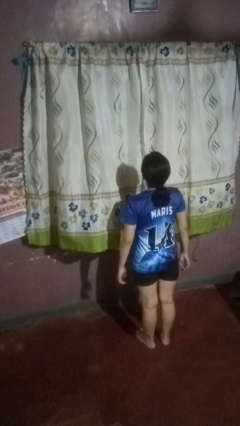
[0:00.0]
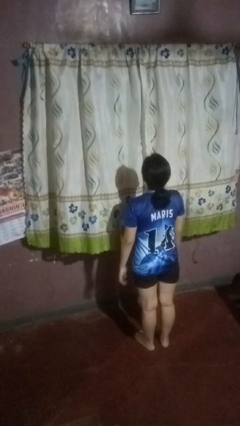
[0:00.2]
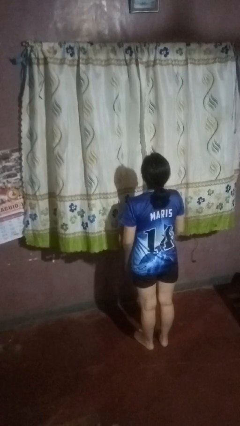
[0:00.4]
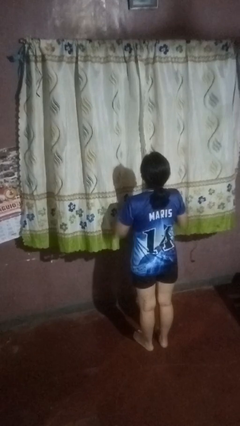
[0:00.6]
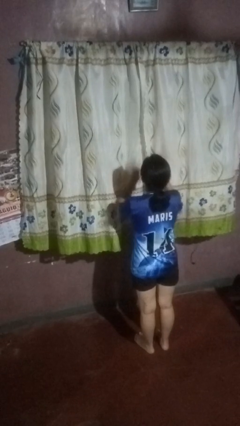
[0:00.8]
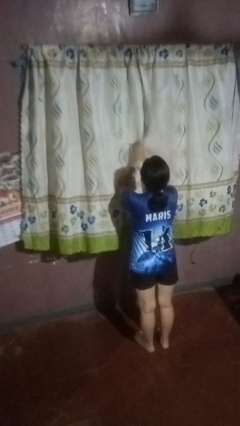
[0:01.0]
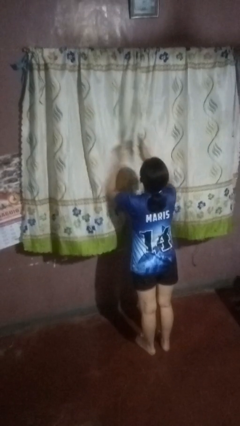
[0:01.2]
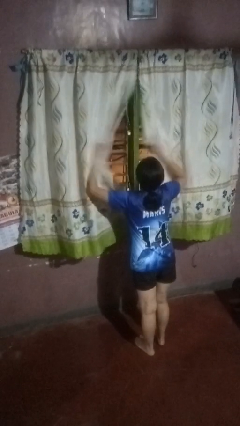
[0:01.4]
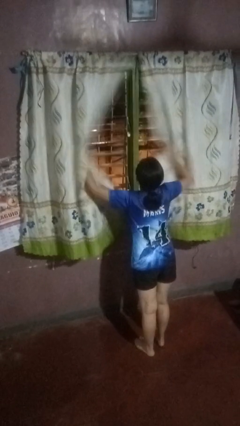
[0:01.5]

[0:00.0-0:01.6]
person opens curtains

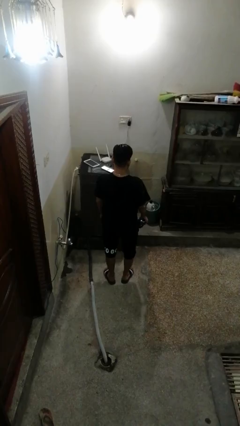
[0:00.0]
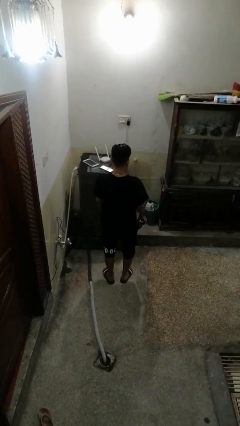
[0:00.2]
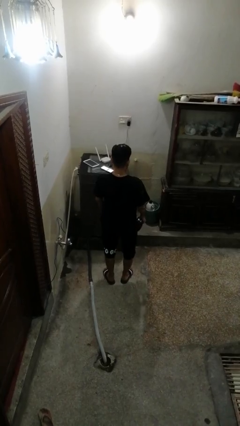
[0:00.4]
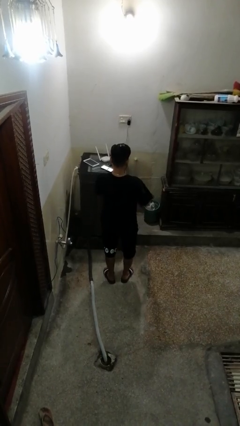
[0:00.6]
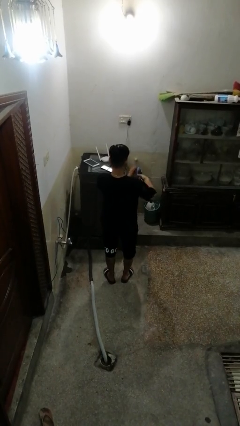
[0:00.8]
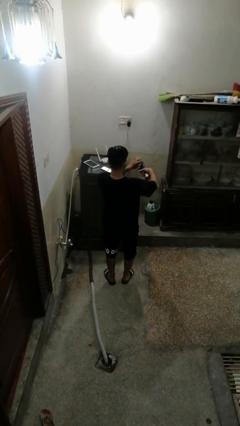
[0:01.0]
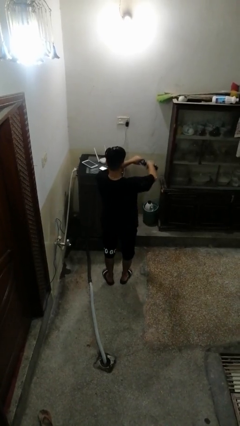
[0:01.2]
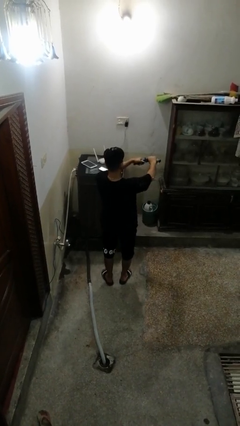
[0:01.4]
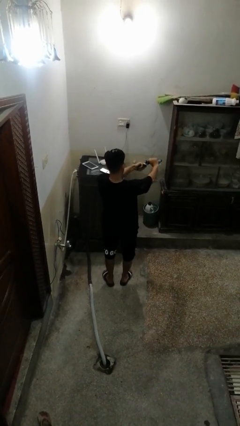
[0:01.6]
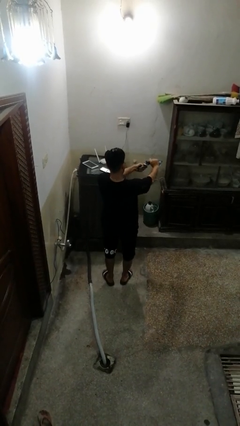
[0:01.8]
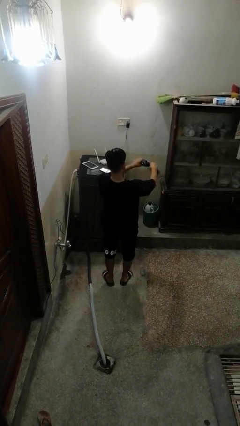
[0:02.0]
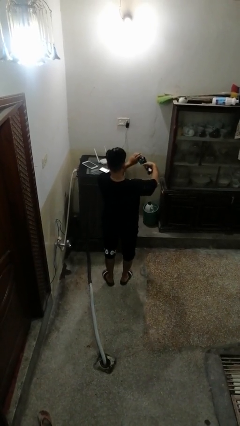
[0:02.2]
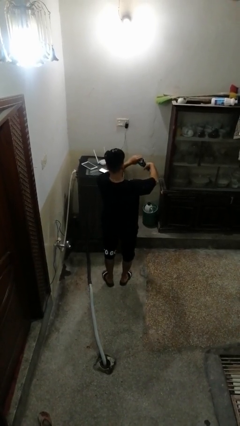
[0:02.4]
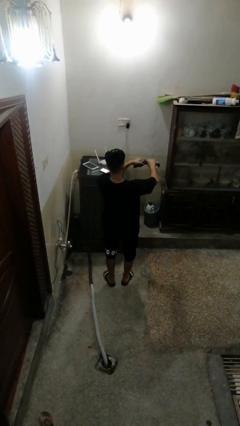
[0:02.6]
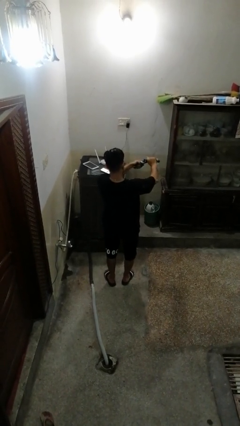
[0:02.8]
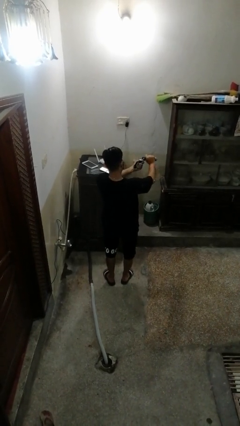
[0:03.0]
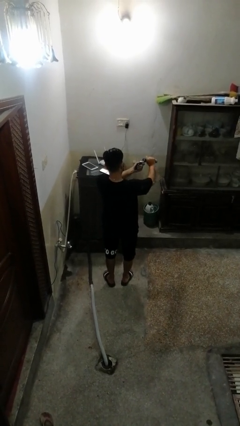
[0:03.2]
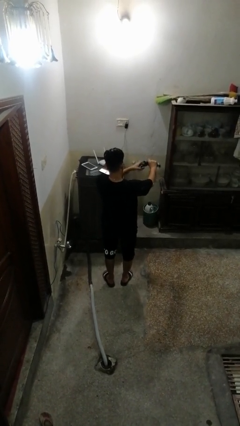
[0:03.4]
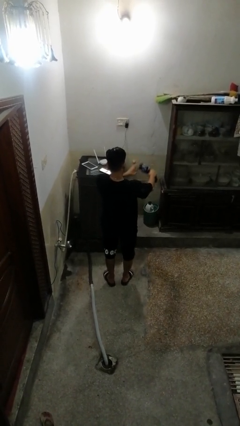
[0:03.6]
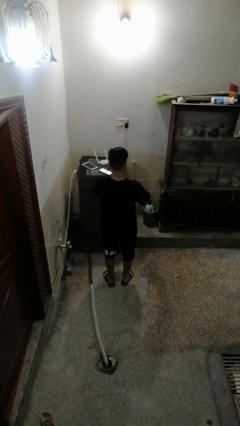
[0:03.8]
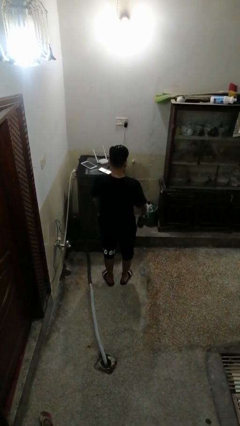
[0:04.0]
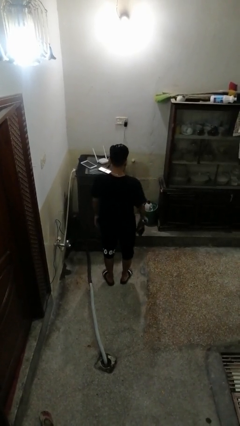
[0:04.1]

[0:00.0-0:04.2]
person squeezes object

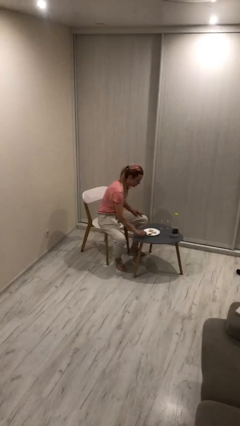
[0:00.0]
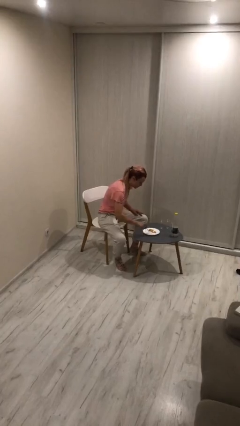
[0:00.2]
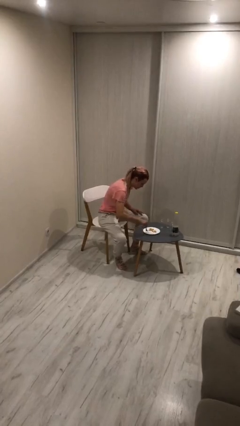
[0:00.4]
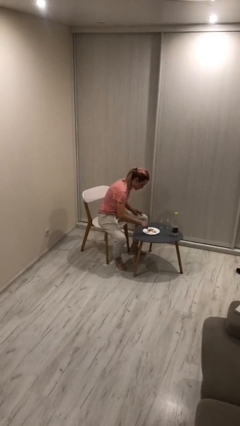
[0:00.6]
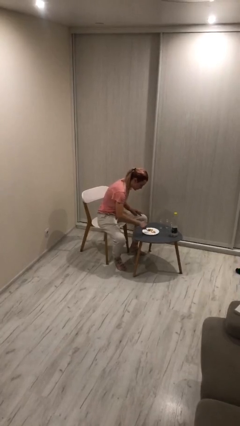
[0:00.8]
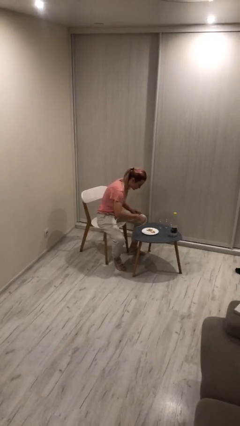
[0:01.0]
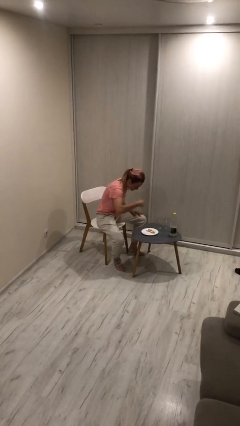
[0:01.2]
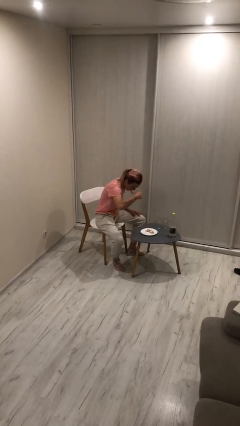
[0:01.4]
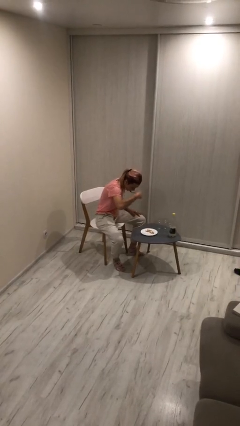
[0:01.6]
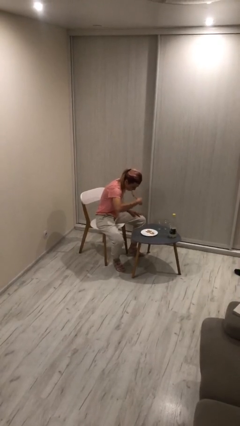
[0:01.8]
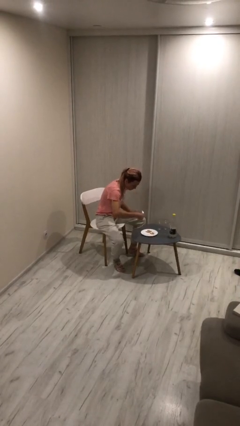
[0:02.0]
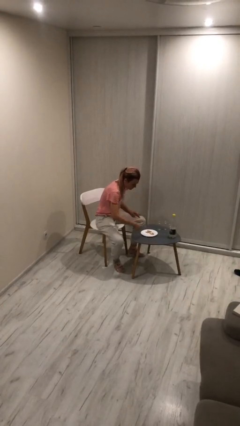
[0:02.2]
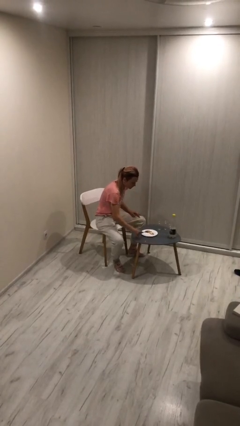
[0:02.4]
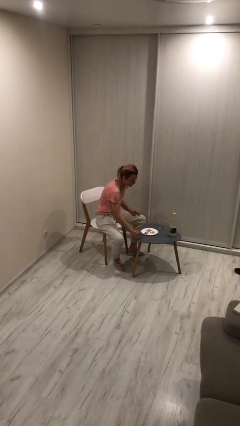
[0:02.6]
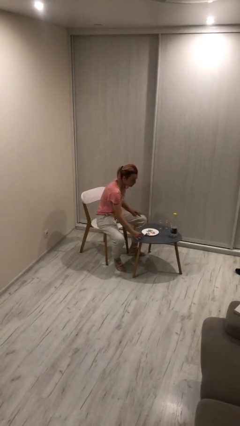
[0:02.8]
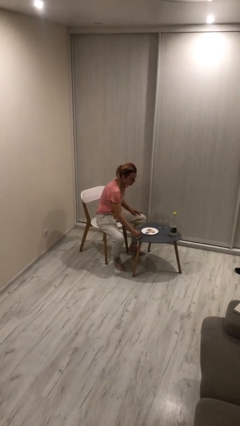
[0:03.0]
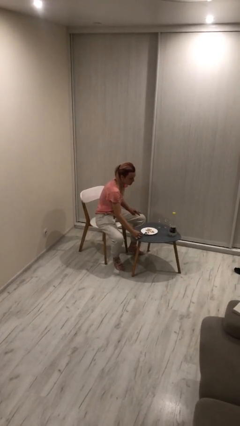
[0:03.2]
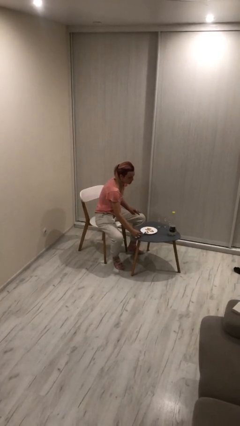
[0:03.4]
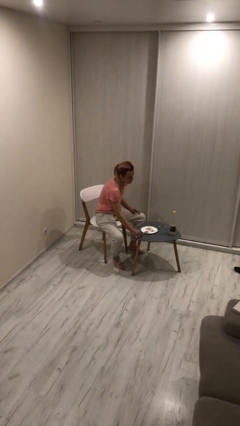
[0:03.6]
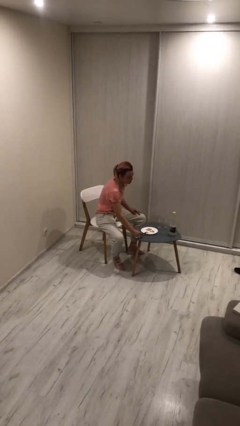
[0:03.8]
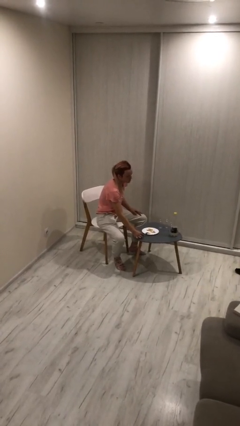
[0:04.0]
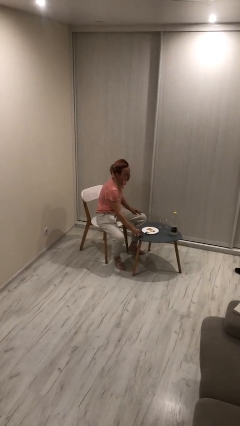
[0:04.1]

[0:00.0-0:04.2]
person eats with utensil

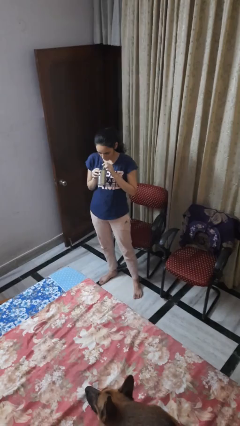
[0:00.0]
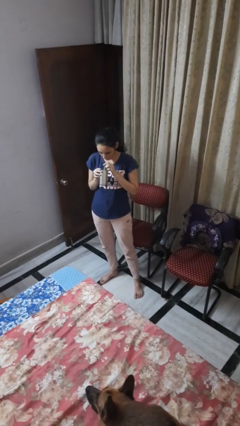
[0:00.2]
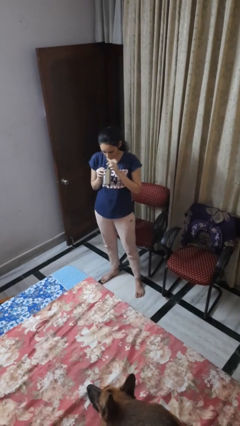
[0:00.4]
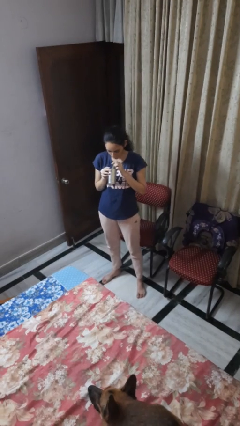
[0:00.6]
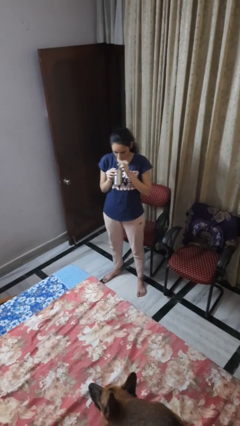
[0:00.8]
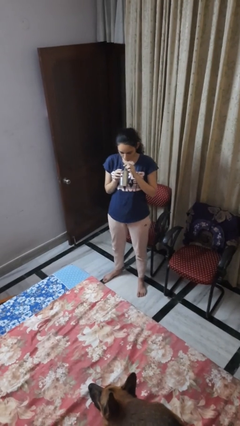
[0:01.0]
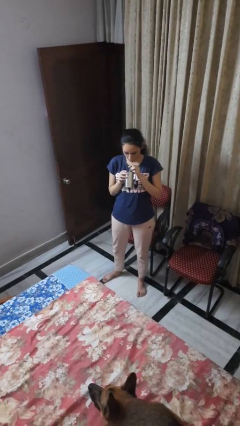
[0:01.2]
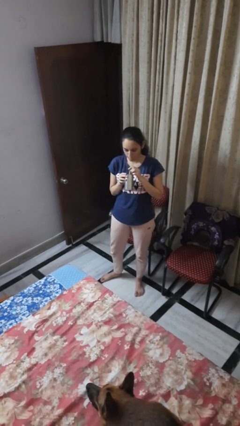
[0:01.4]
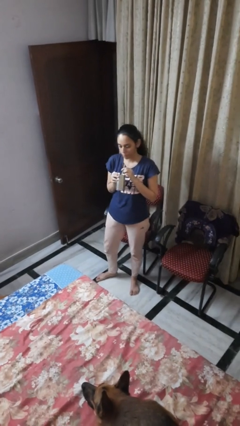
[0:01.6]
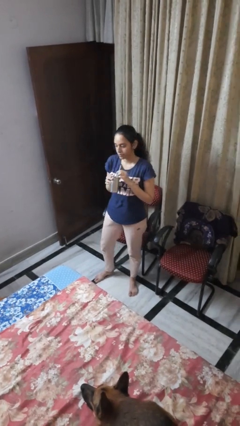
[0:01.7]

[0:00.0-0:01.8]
person drinks from straw

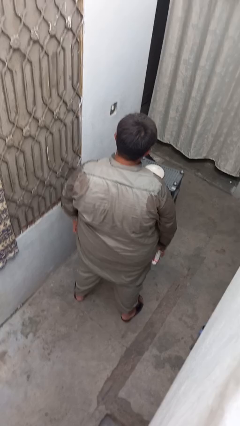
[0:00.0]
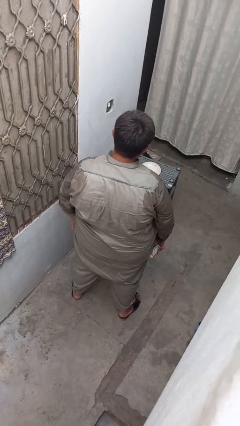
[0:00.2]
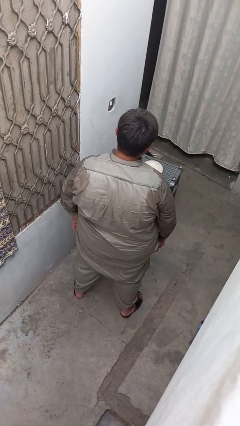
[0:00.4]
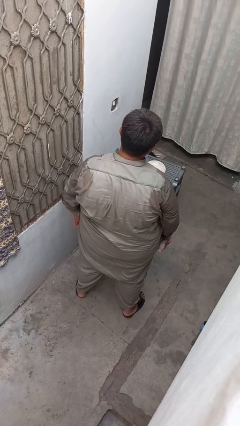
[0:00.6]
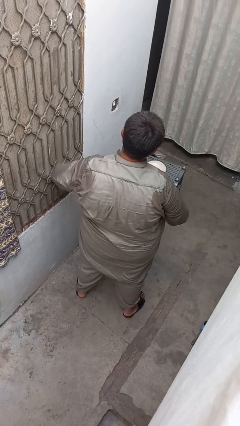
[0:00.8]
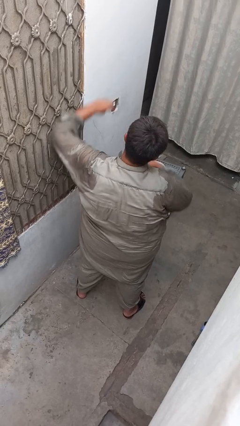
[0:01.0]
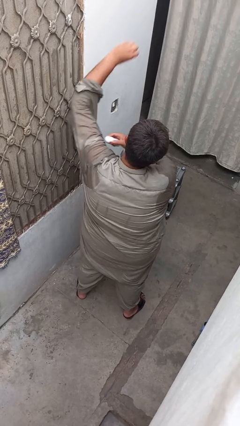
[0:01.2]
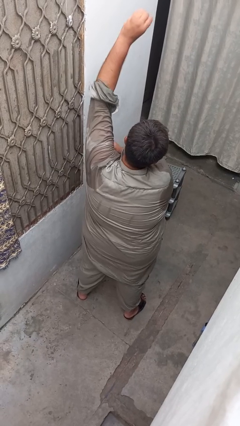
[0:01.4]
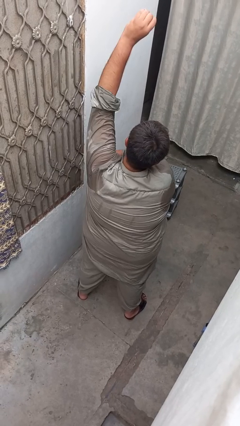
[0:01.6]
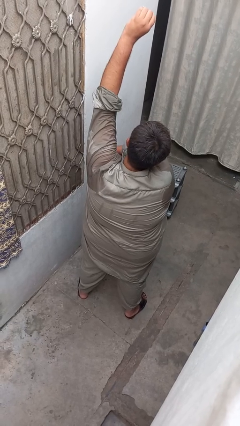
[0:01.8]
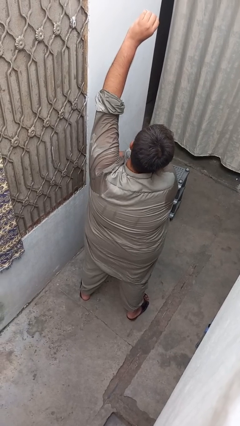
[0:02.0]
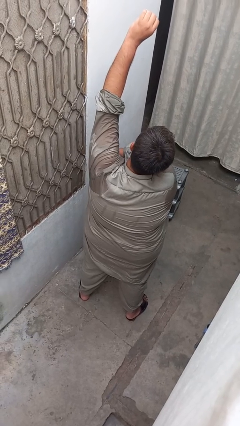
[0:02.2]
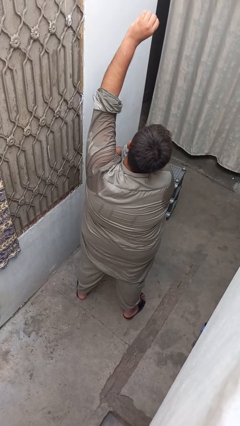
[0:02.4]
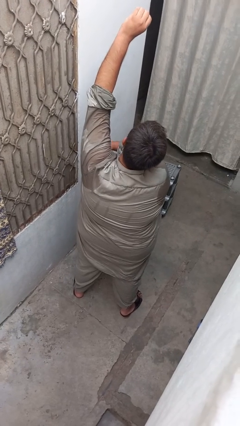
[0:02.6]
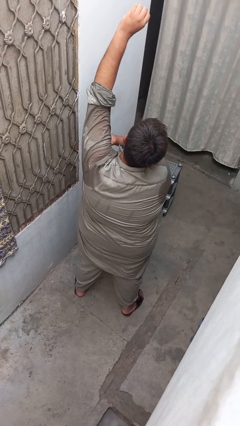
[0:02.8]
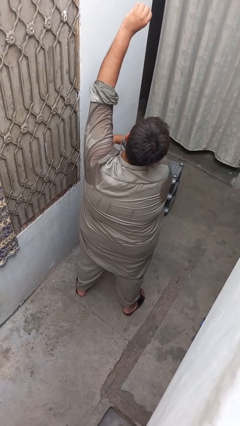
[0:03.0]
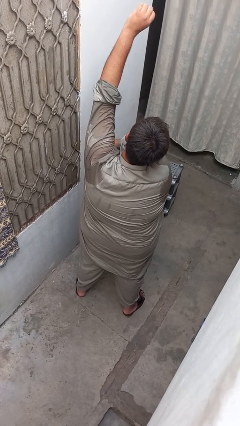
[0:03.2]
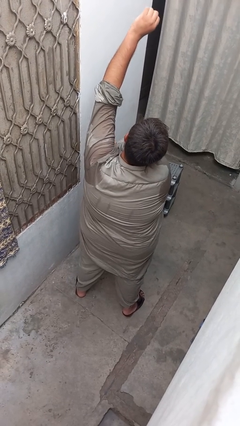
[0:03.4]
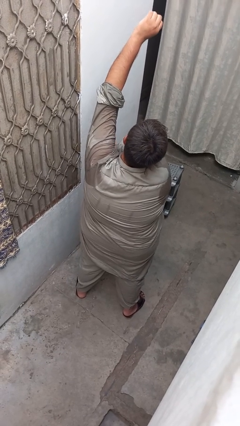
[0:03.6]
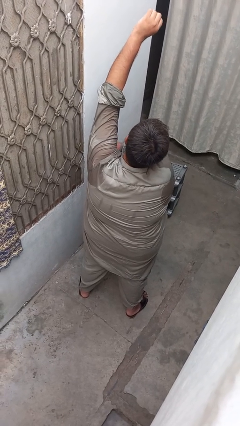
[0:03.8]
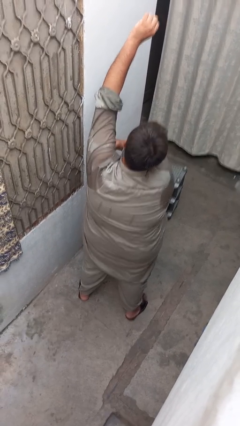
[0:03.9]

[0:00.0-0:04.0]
person applies deodorant

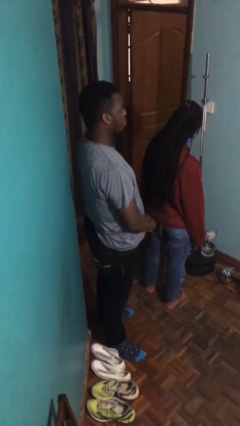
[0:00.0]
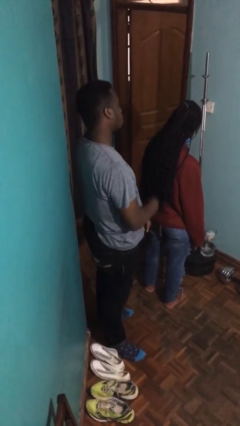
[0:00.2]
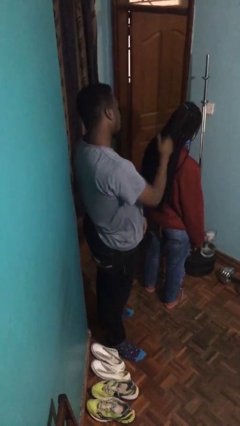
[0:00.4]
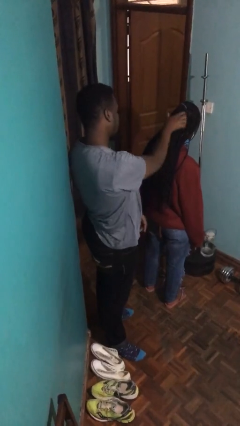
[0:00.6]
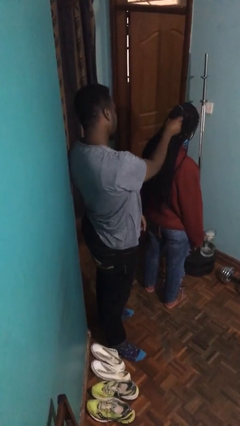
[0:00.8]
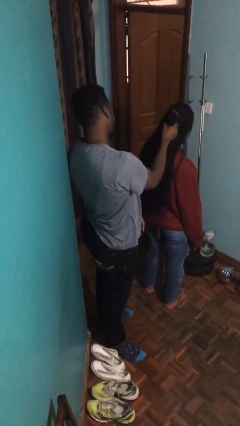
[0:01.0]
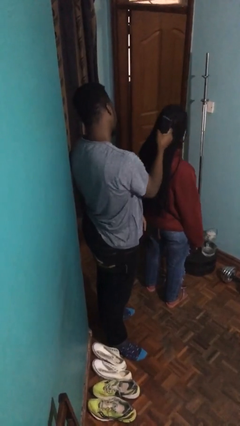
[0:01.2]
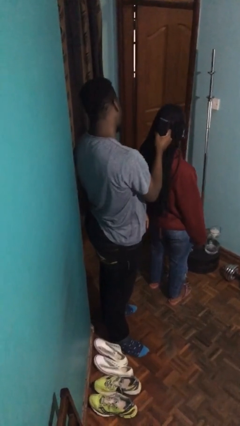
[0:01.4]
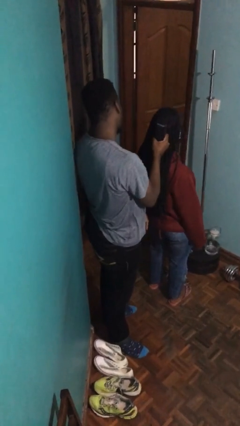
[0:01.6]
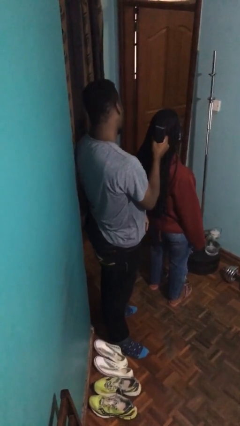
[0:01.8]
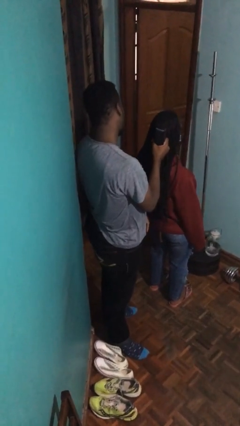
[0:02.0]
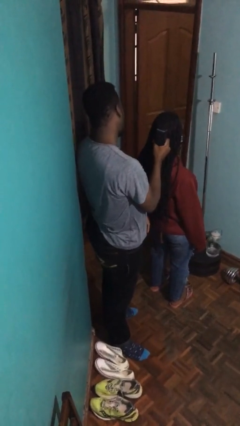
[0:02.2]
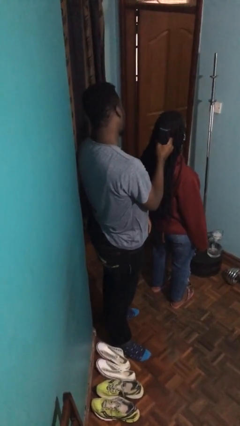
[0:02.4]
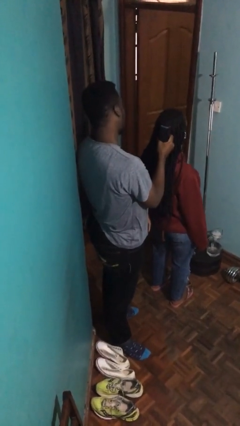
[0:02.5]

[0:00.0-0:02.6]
person grabs person by hair
